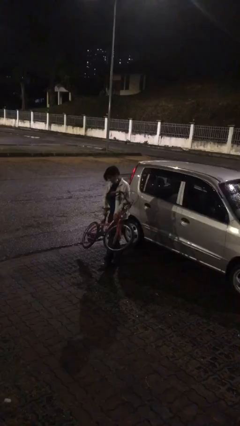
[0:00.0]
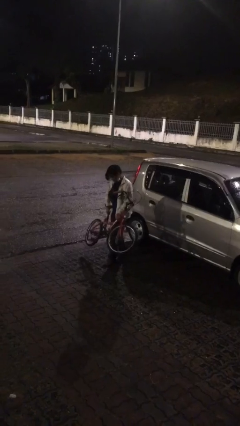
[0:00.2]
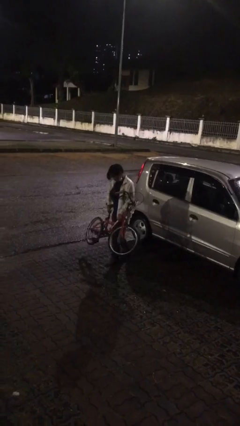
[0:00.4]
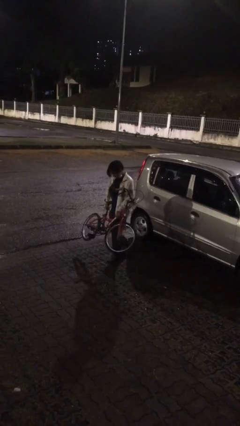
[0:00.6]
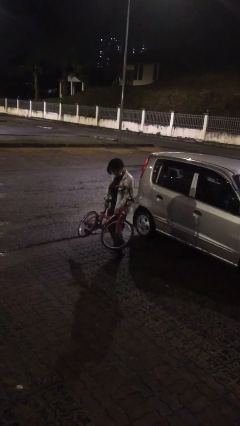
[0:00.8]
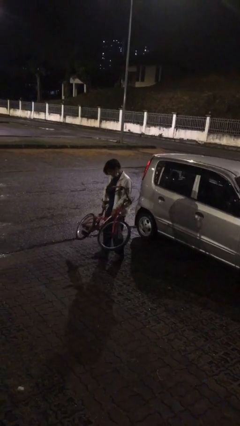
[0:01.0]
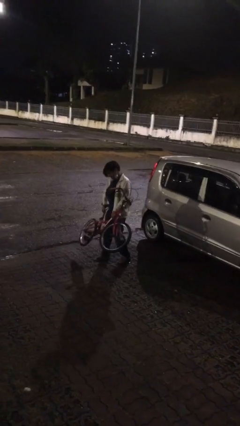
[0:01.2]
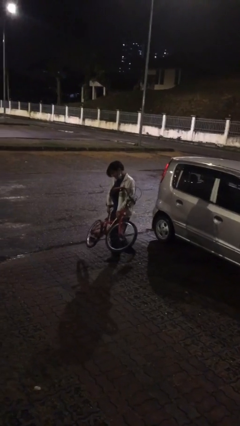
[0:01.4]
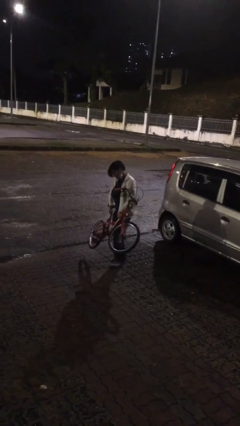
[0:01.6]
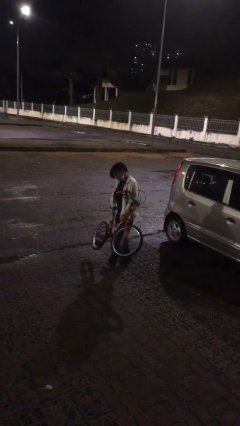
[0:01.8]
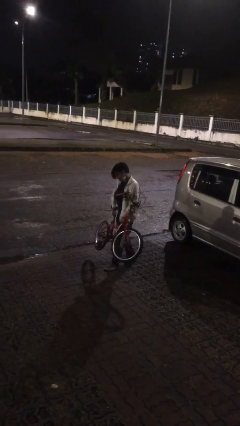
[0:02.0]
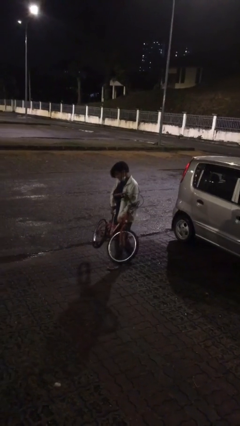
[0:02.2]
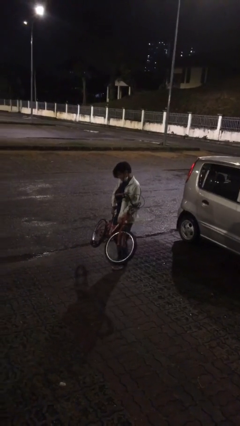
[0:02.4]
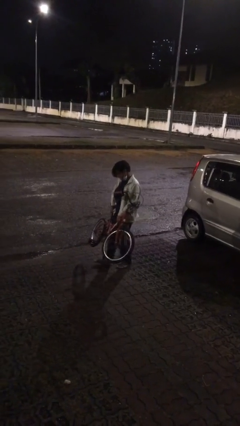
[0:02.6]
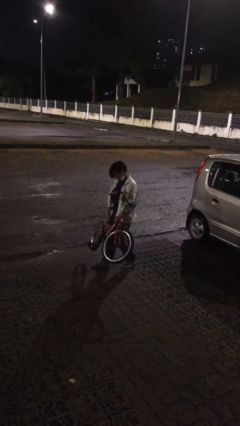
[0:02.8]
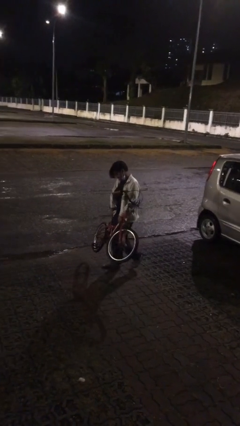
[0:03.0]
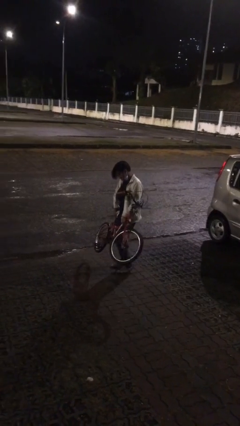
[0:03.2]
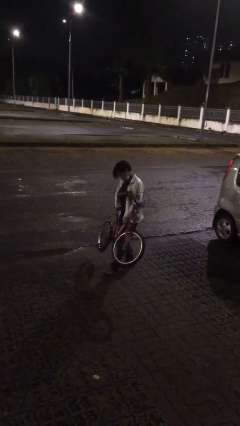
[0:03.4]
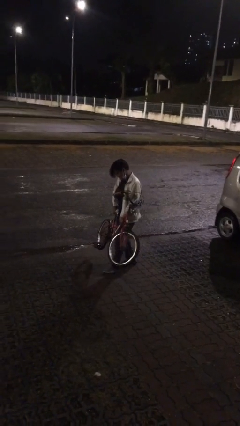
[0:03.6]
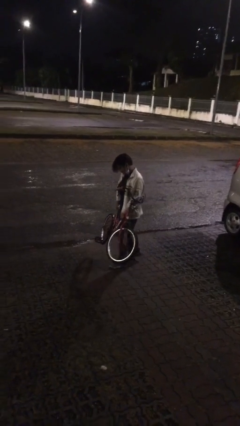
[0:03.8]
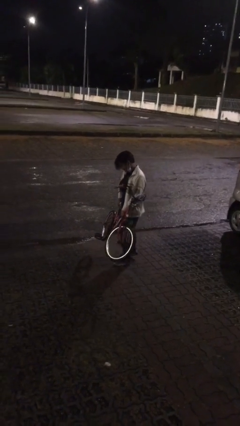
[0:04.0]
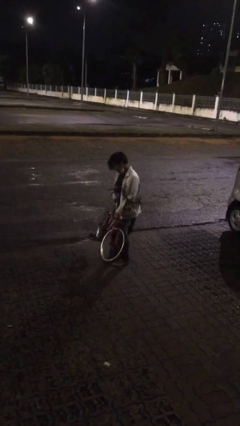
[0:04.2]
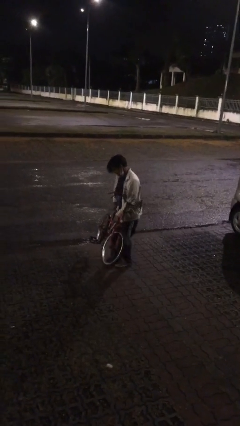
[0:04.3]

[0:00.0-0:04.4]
person carries heavy object

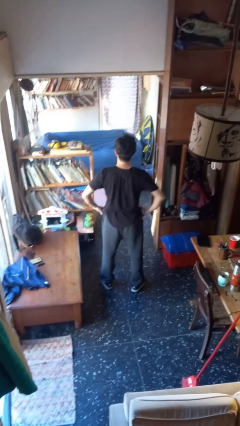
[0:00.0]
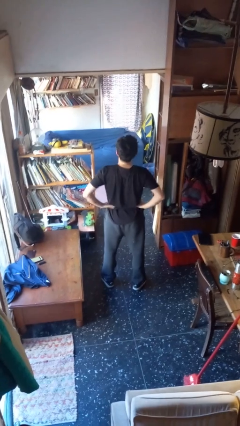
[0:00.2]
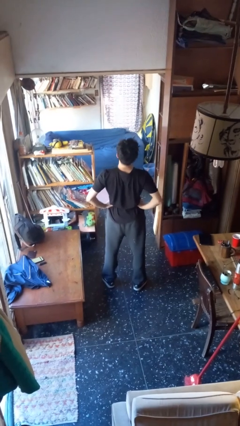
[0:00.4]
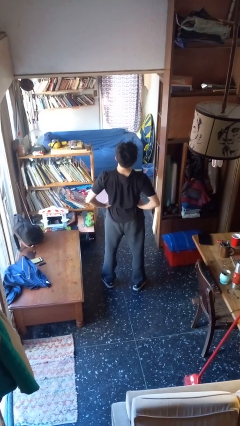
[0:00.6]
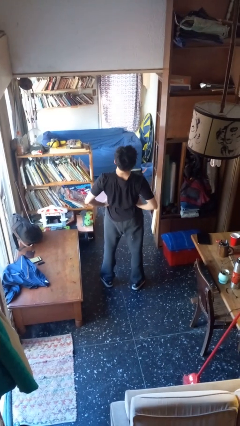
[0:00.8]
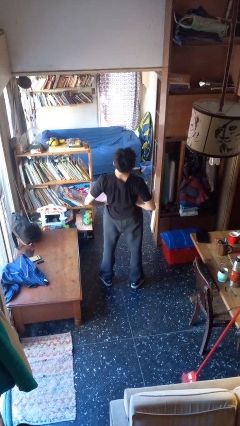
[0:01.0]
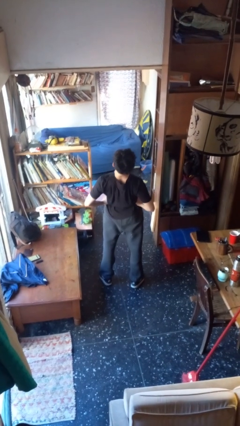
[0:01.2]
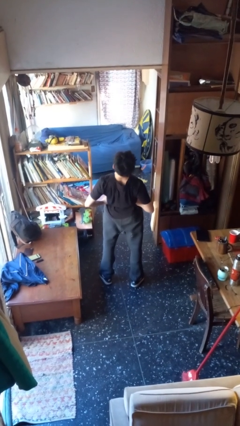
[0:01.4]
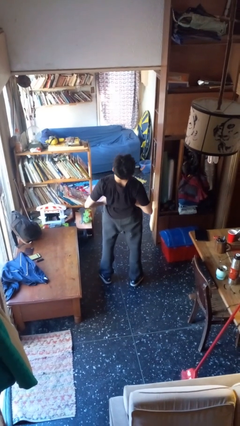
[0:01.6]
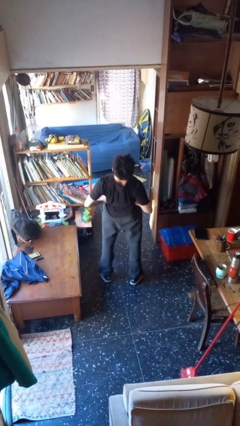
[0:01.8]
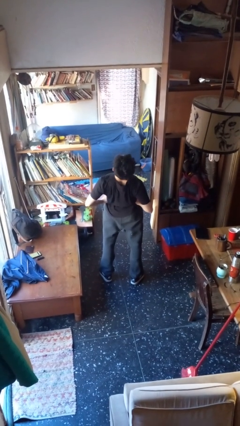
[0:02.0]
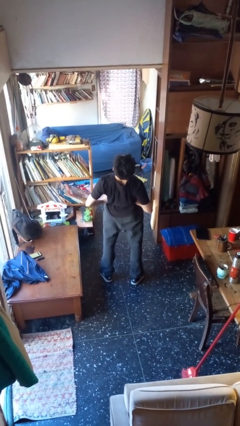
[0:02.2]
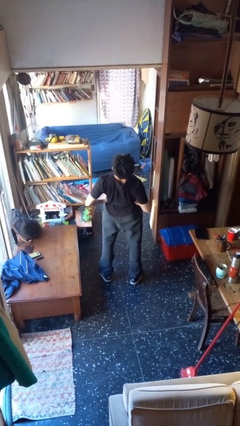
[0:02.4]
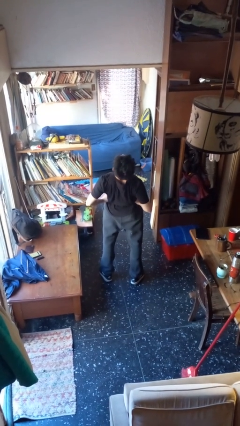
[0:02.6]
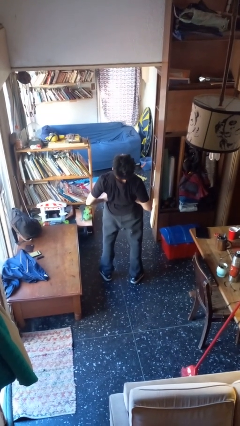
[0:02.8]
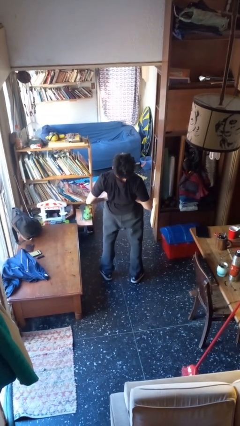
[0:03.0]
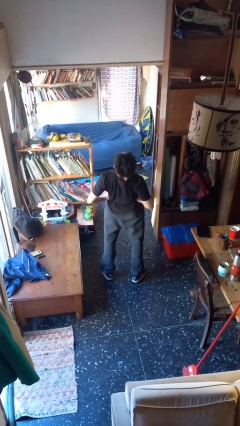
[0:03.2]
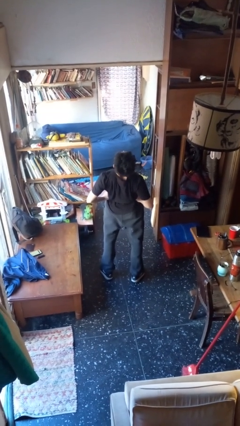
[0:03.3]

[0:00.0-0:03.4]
person stretches back

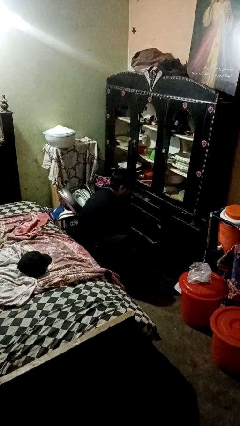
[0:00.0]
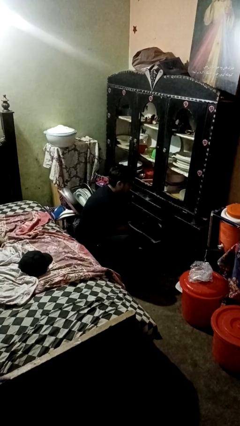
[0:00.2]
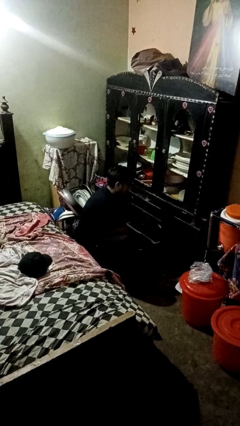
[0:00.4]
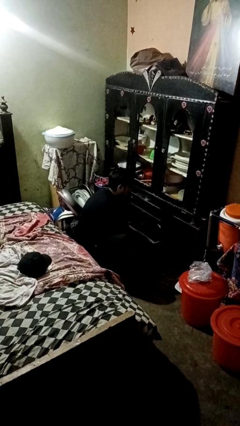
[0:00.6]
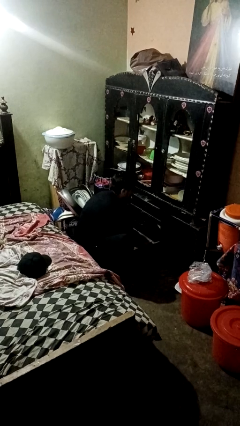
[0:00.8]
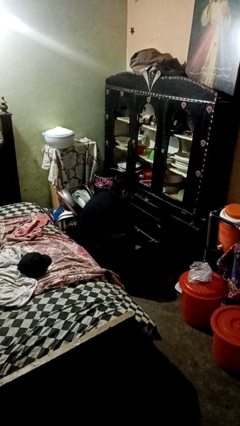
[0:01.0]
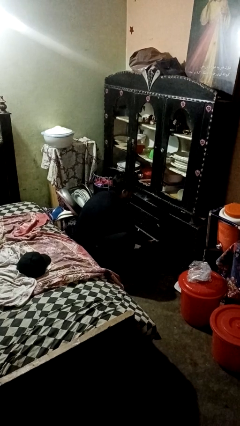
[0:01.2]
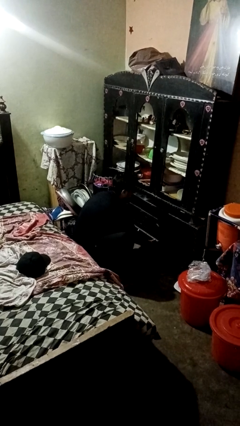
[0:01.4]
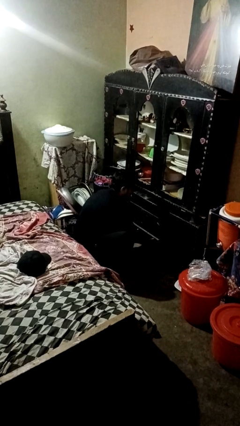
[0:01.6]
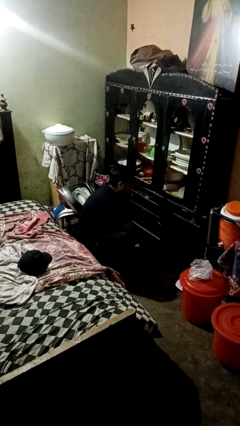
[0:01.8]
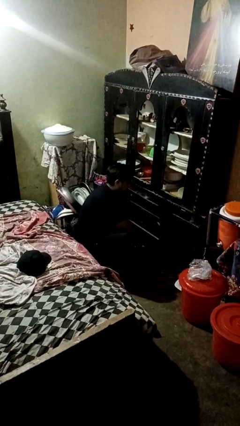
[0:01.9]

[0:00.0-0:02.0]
person closes kitchen drawer

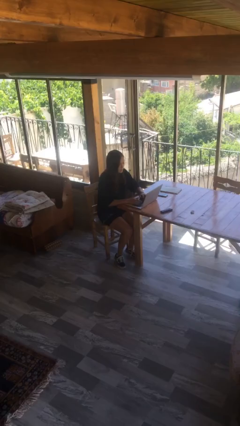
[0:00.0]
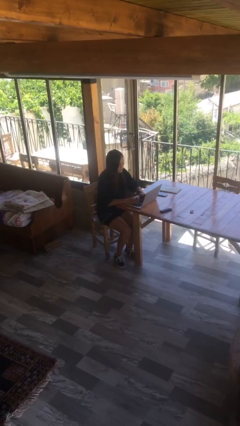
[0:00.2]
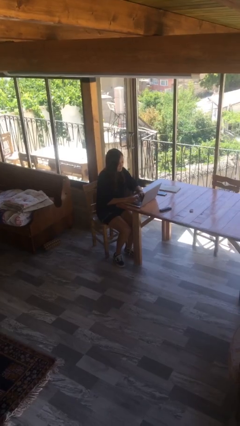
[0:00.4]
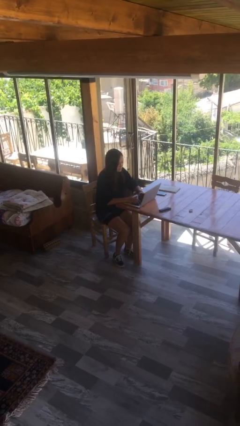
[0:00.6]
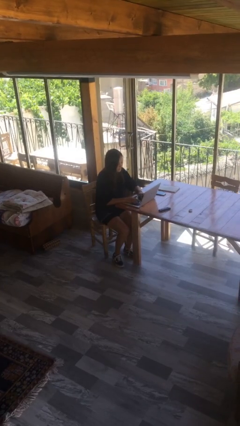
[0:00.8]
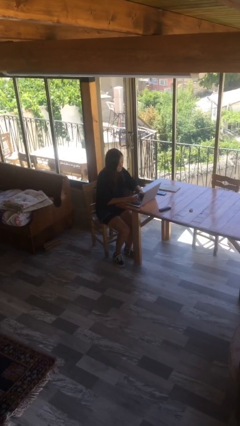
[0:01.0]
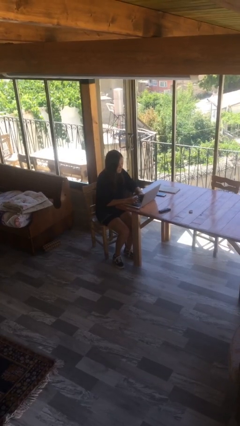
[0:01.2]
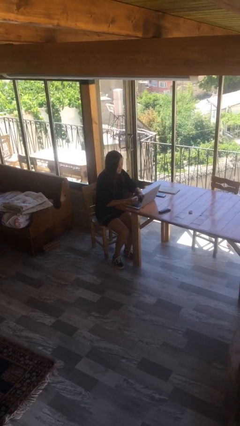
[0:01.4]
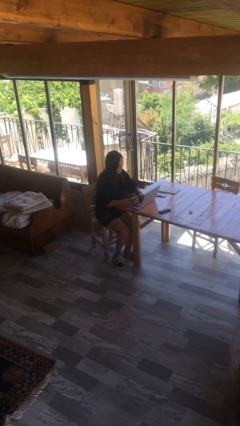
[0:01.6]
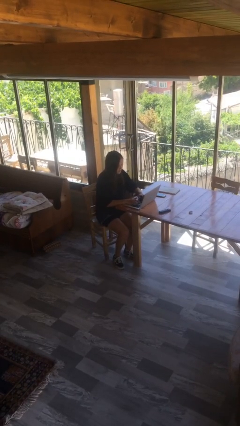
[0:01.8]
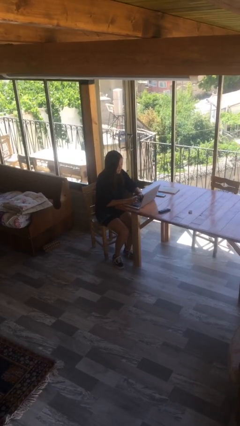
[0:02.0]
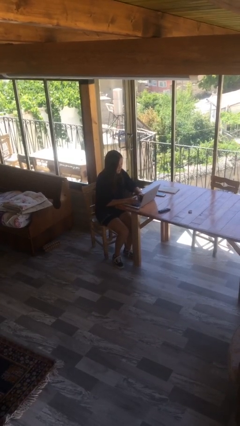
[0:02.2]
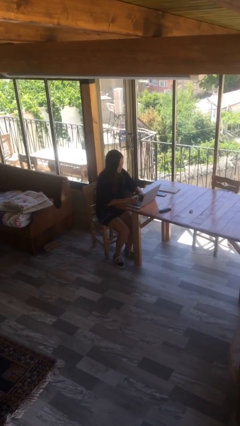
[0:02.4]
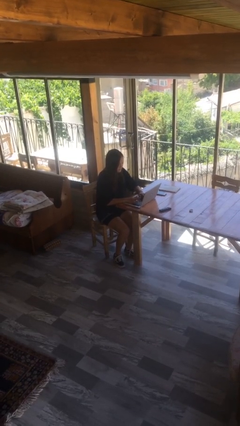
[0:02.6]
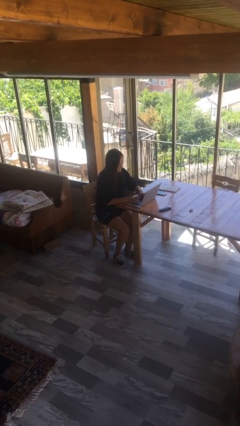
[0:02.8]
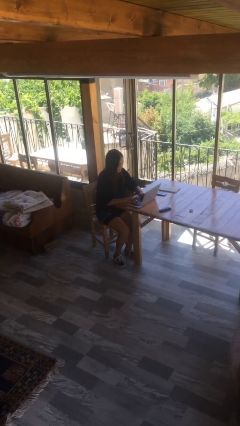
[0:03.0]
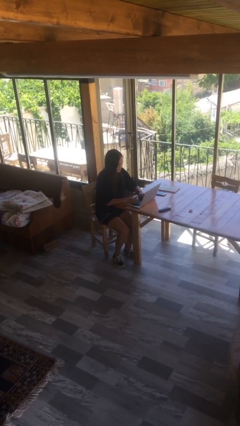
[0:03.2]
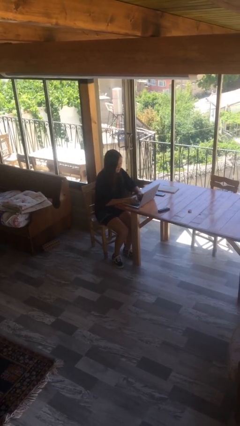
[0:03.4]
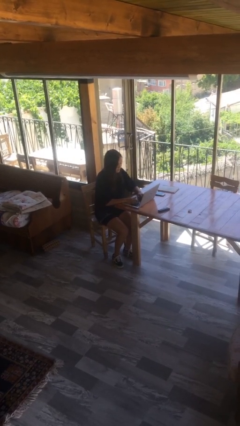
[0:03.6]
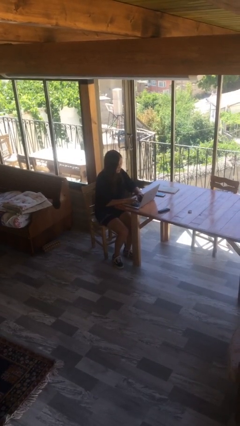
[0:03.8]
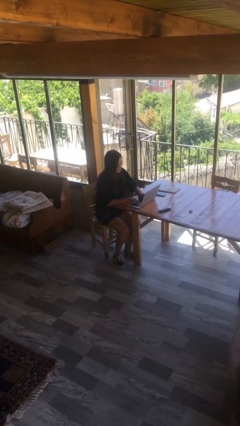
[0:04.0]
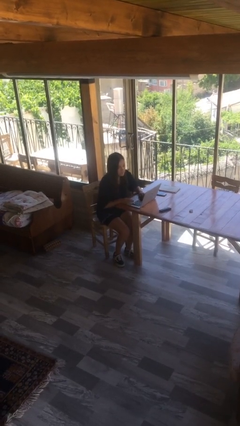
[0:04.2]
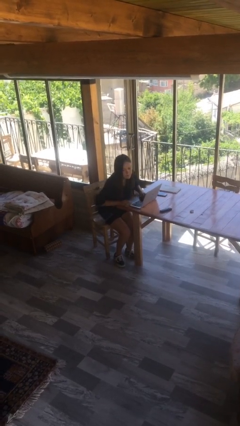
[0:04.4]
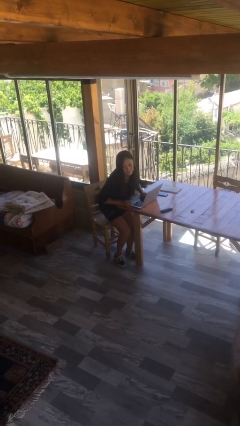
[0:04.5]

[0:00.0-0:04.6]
person interacts with laptop

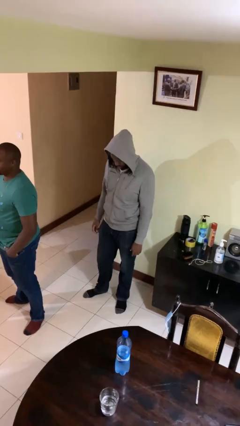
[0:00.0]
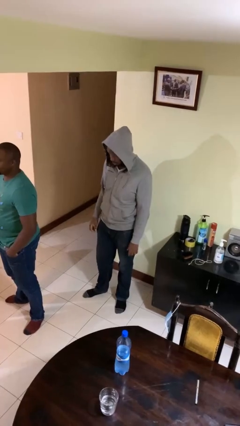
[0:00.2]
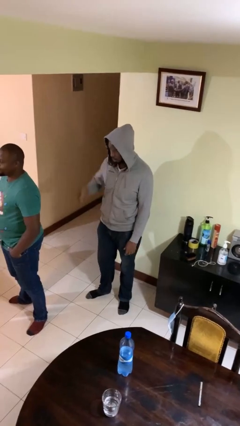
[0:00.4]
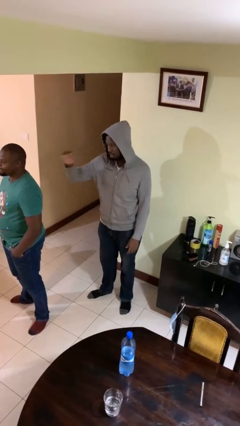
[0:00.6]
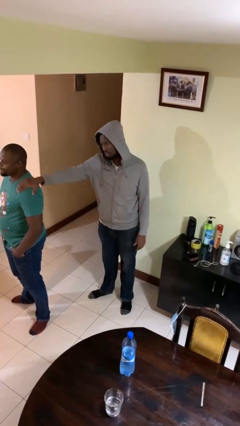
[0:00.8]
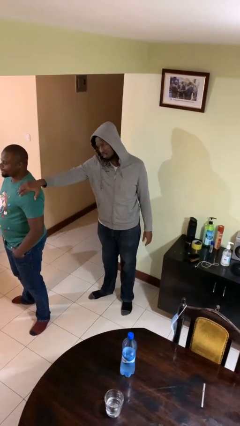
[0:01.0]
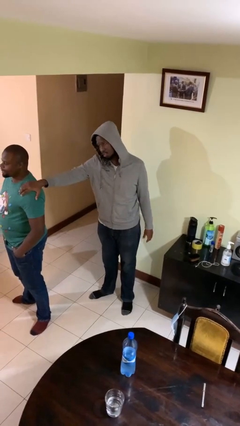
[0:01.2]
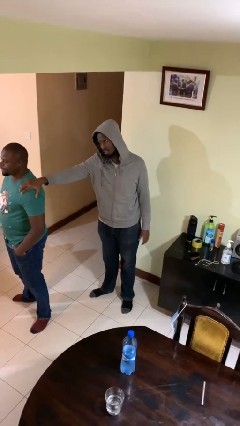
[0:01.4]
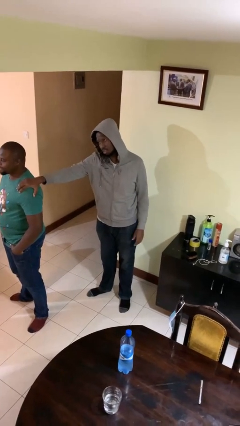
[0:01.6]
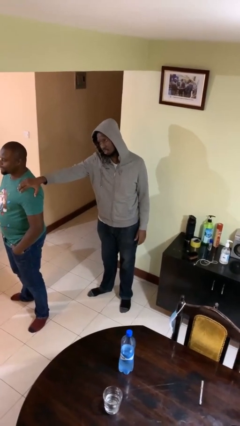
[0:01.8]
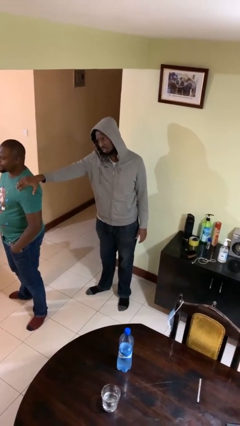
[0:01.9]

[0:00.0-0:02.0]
person grabs person by shoulder

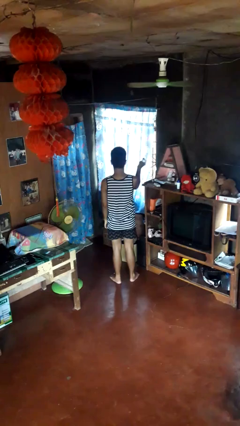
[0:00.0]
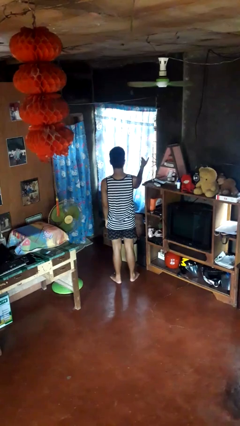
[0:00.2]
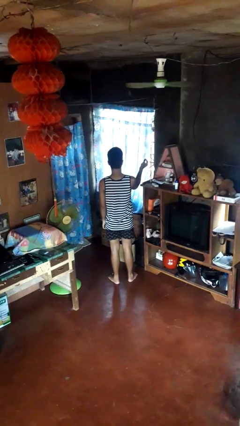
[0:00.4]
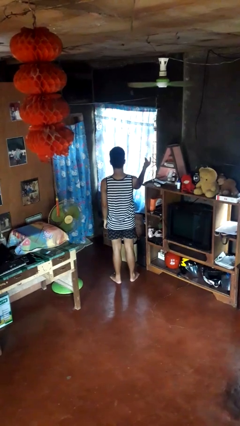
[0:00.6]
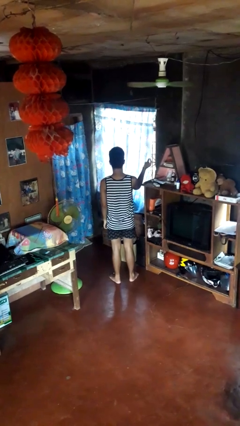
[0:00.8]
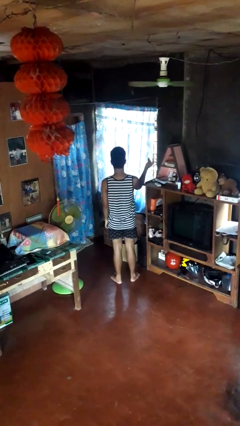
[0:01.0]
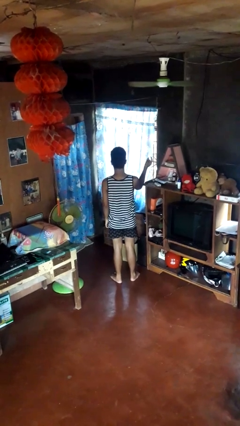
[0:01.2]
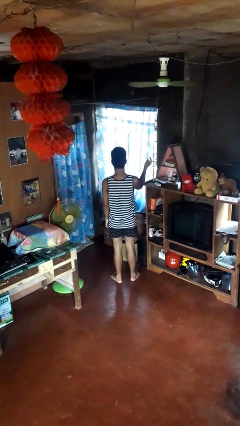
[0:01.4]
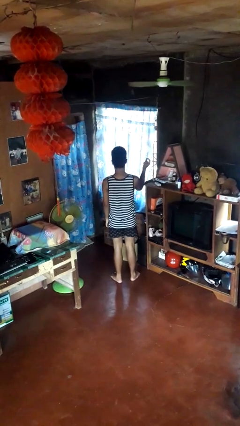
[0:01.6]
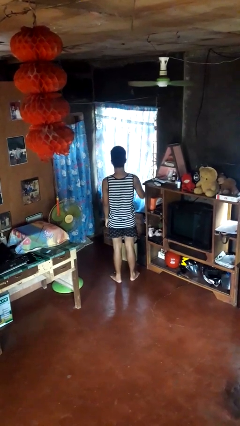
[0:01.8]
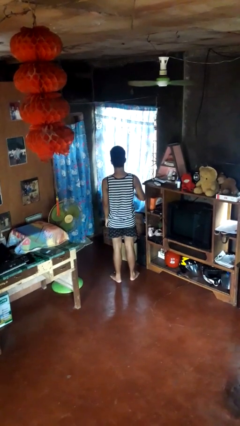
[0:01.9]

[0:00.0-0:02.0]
person snaps fingers
